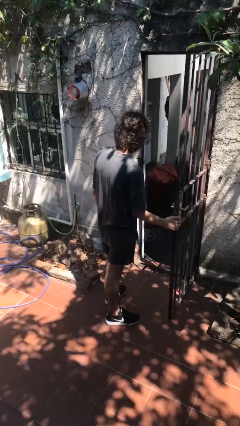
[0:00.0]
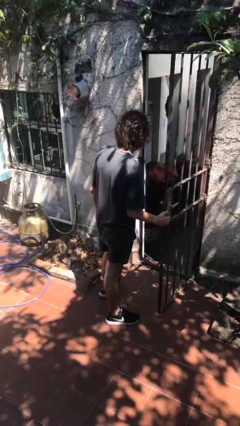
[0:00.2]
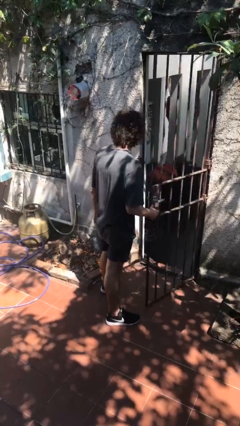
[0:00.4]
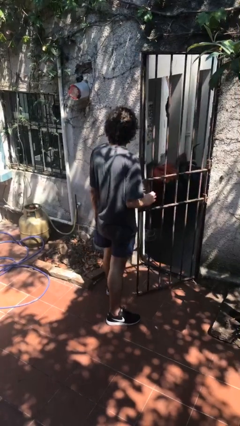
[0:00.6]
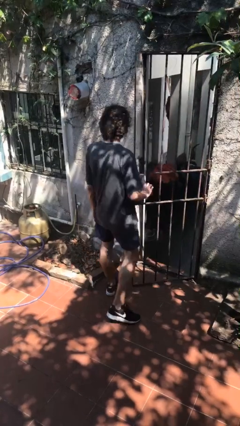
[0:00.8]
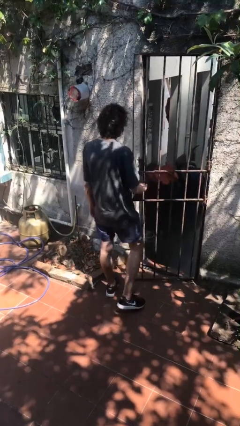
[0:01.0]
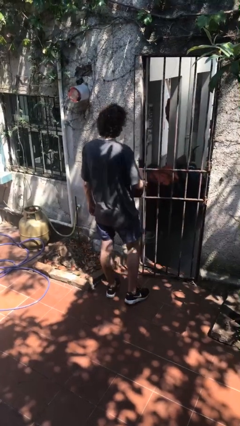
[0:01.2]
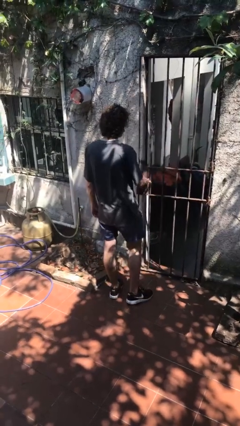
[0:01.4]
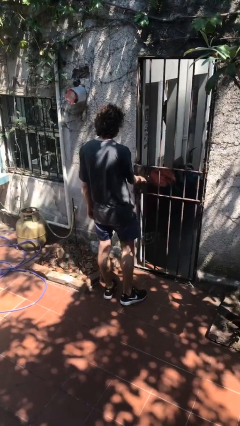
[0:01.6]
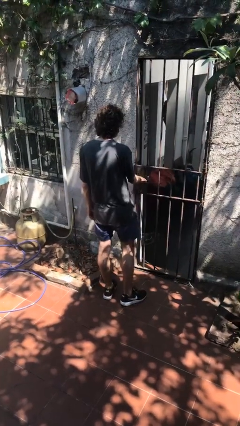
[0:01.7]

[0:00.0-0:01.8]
person closes facility door

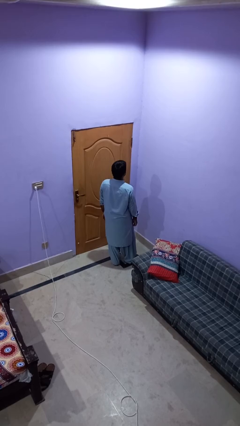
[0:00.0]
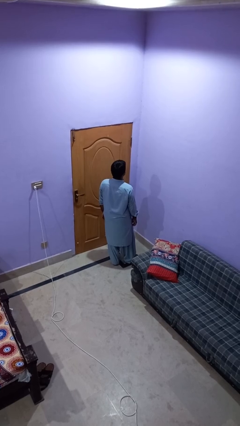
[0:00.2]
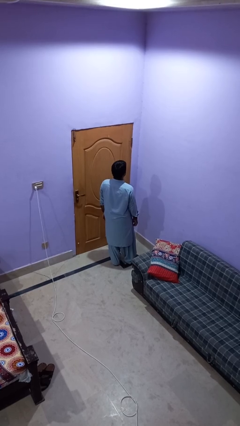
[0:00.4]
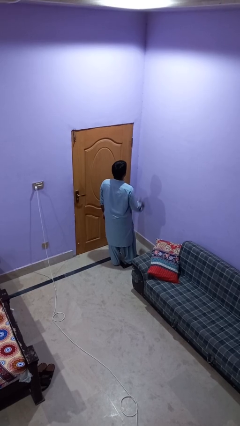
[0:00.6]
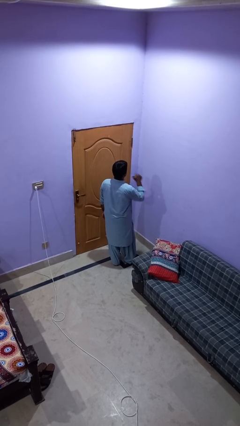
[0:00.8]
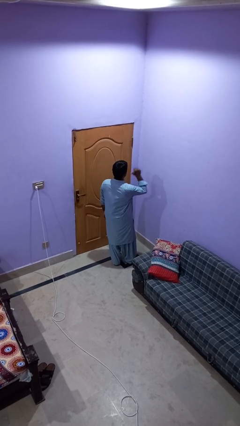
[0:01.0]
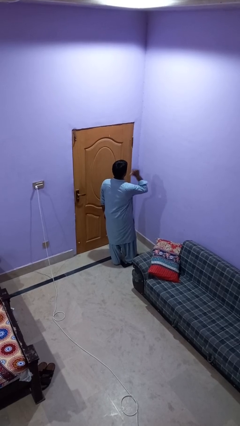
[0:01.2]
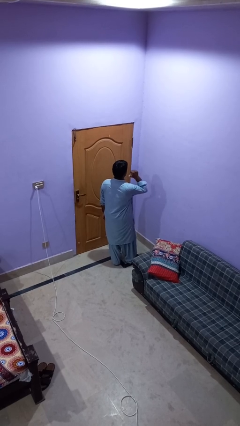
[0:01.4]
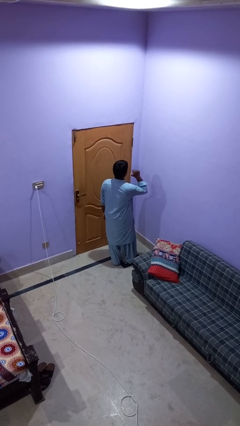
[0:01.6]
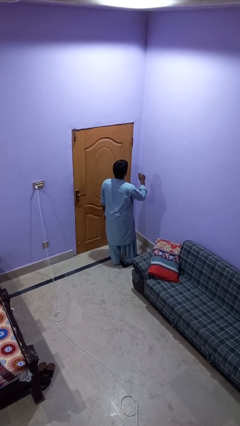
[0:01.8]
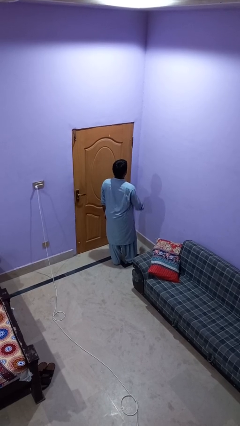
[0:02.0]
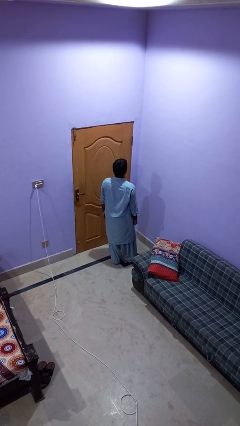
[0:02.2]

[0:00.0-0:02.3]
person gestures behind me

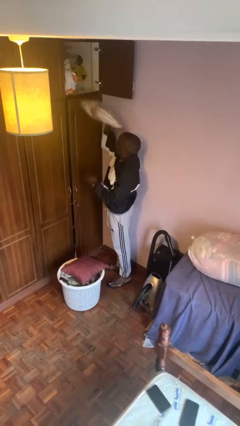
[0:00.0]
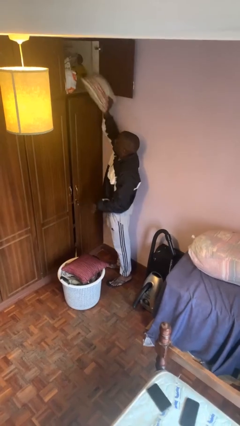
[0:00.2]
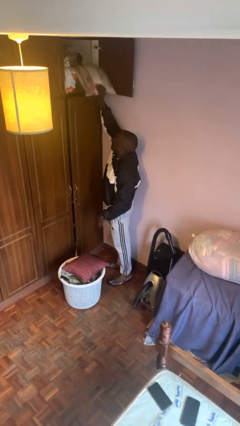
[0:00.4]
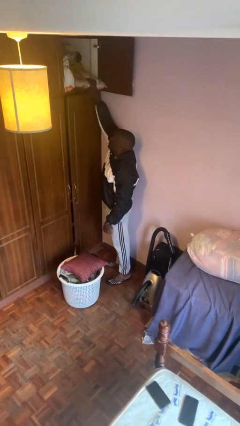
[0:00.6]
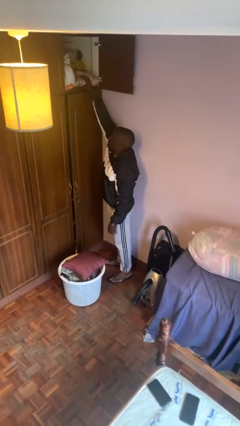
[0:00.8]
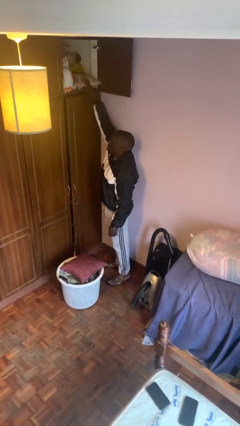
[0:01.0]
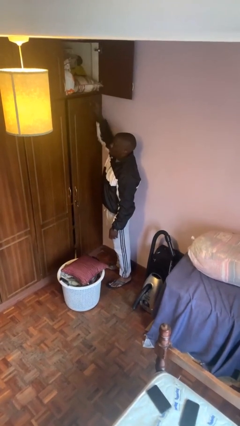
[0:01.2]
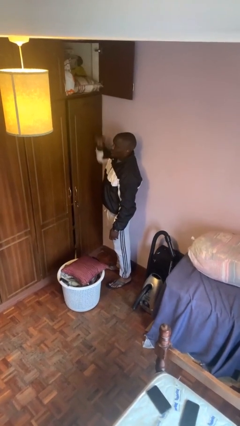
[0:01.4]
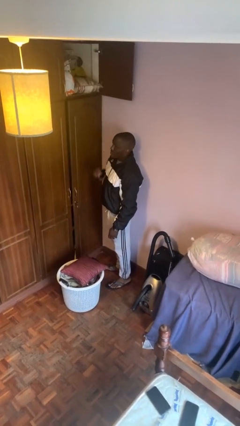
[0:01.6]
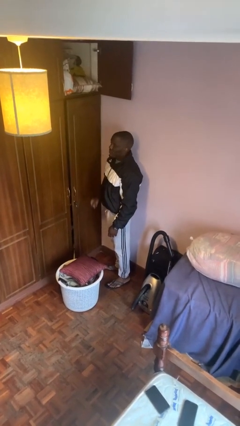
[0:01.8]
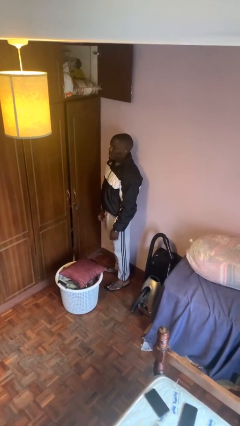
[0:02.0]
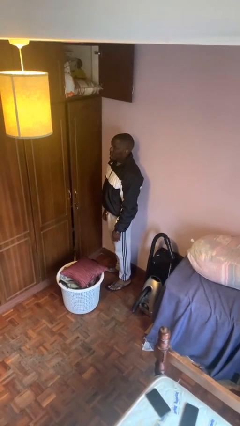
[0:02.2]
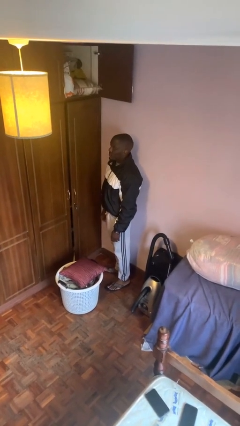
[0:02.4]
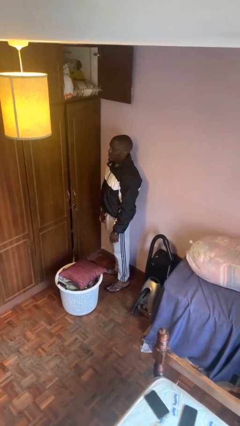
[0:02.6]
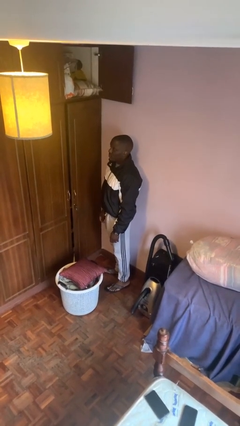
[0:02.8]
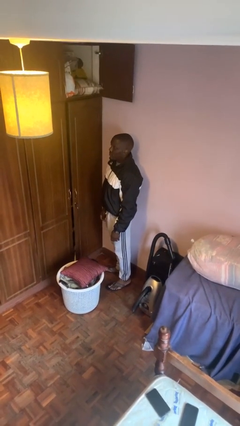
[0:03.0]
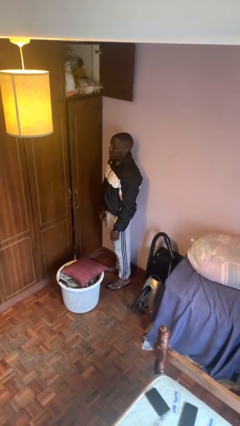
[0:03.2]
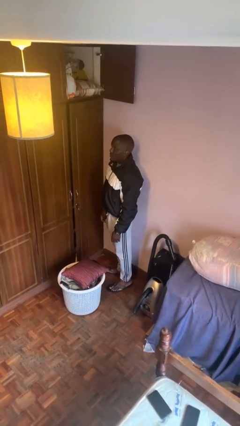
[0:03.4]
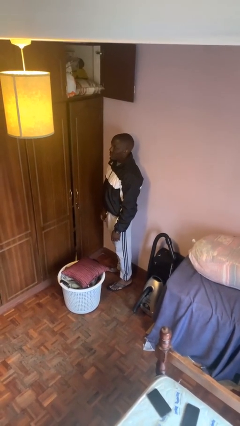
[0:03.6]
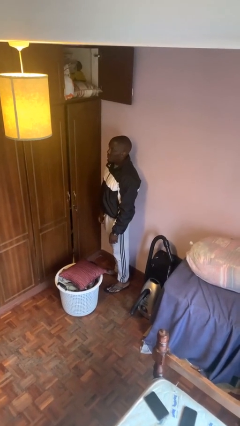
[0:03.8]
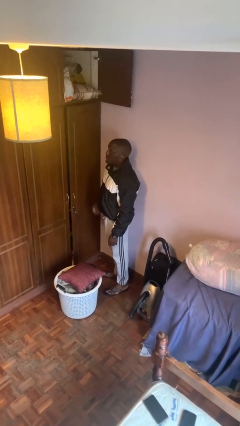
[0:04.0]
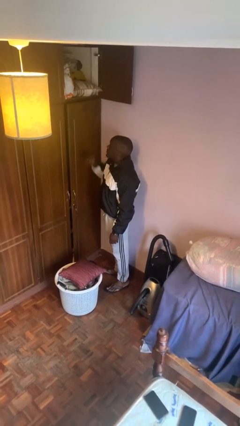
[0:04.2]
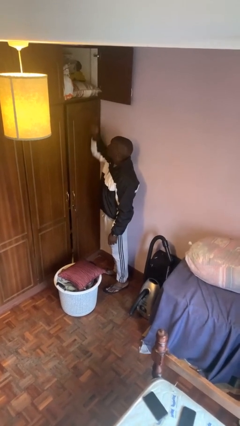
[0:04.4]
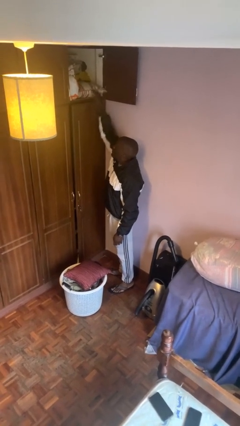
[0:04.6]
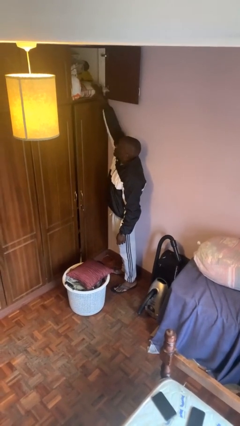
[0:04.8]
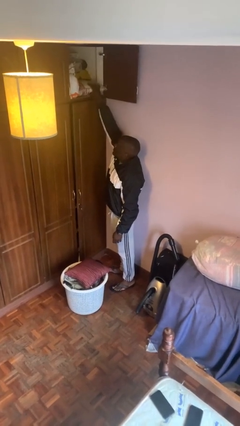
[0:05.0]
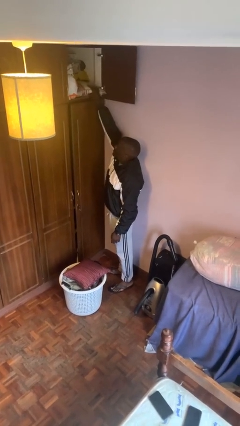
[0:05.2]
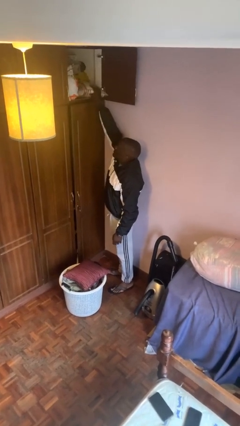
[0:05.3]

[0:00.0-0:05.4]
person puts down object on shelf

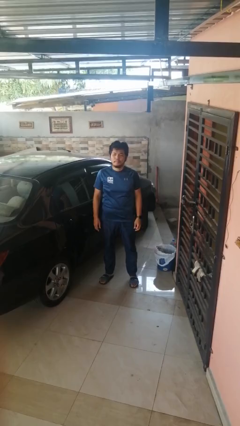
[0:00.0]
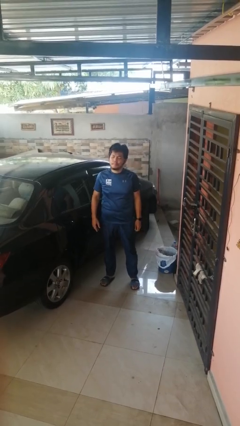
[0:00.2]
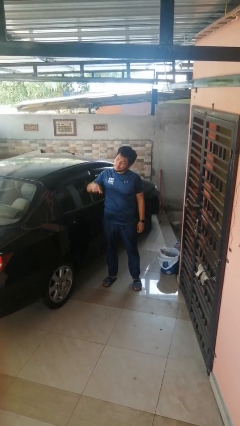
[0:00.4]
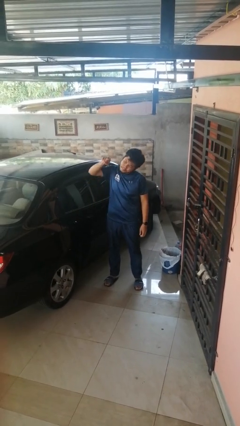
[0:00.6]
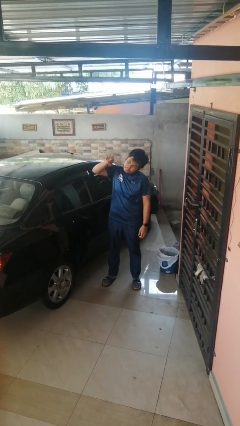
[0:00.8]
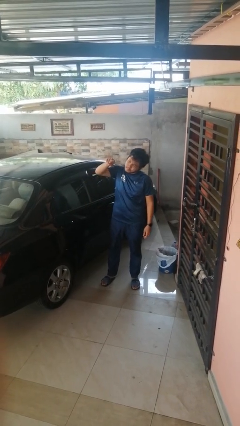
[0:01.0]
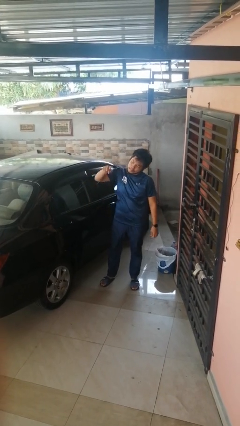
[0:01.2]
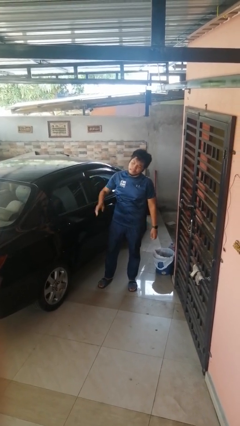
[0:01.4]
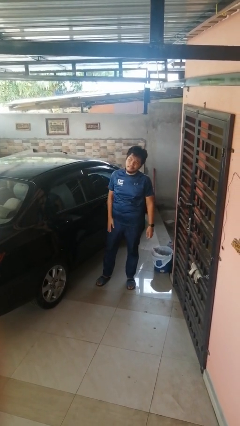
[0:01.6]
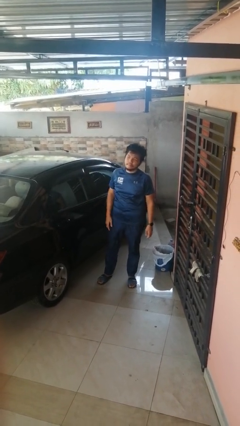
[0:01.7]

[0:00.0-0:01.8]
person points at person

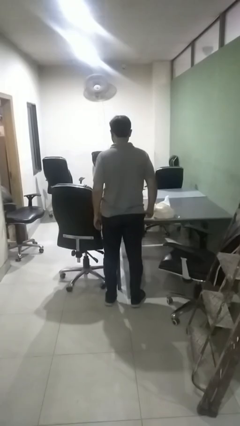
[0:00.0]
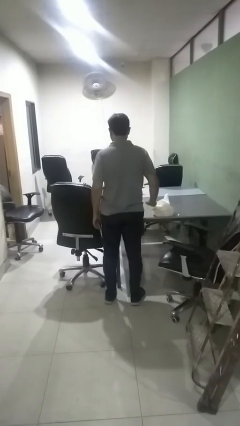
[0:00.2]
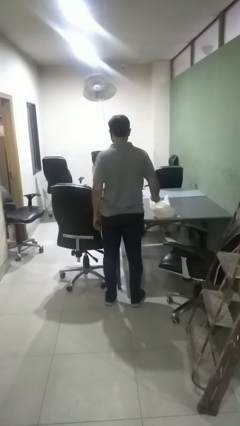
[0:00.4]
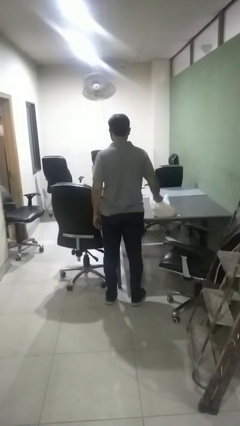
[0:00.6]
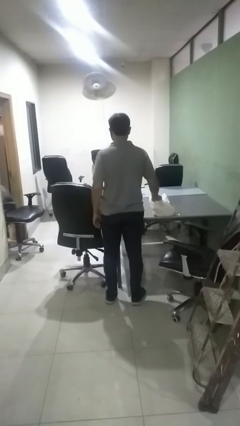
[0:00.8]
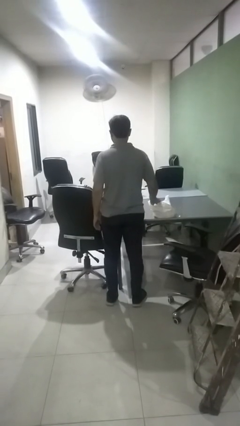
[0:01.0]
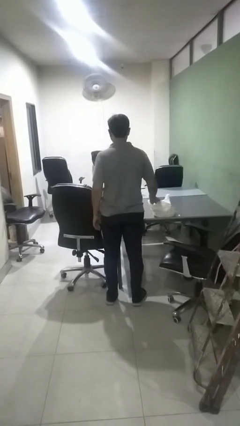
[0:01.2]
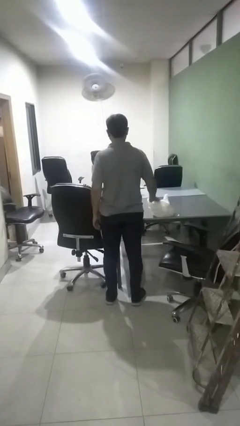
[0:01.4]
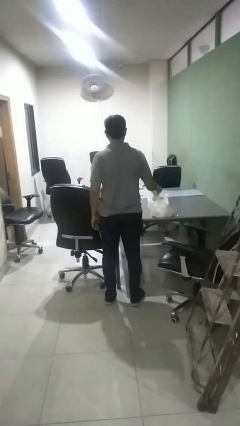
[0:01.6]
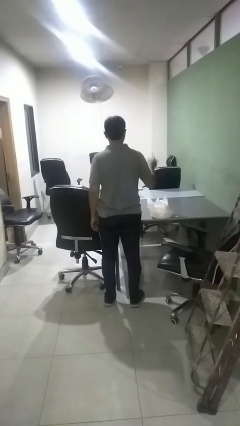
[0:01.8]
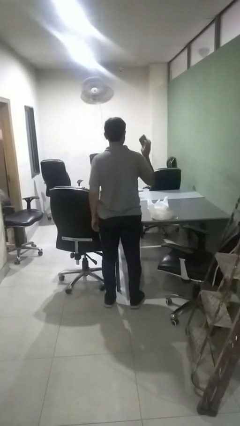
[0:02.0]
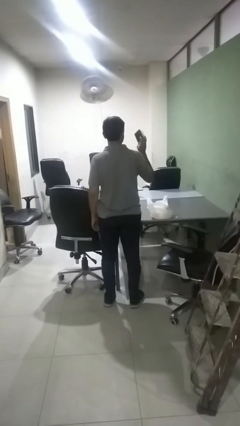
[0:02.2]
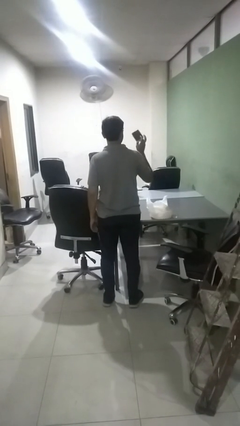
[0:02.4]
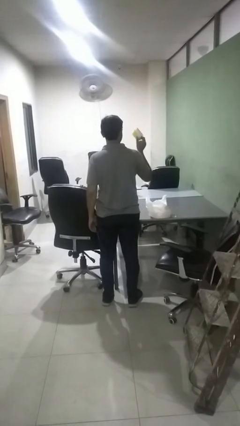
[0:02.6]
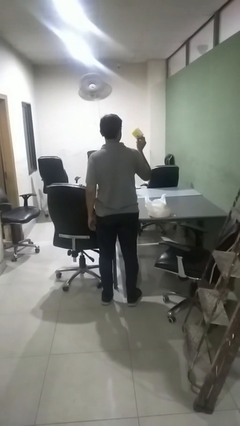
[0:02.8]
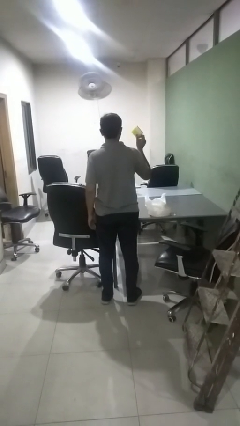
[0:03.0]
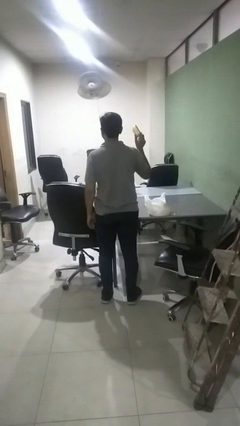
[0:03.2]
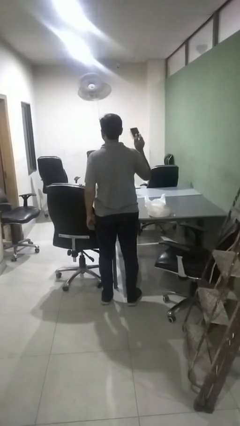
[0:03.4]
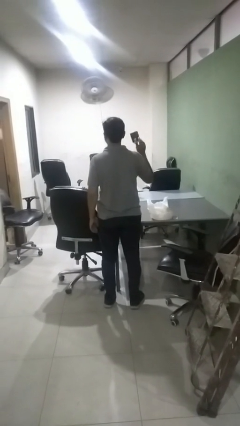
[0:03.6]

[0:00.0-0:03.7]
person takes object from bag

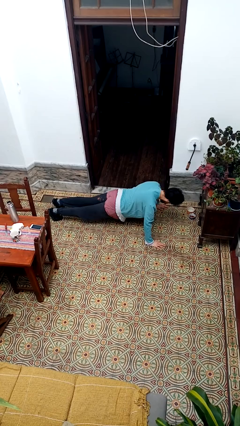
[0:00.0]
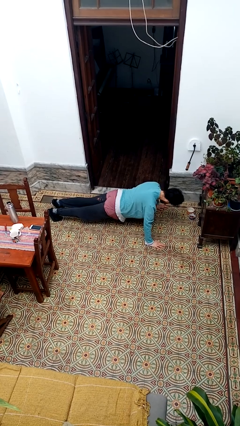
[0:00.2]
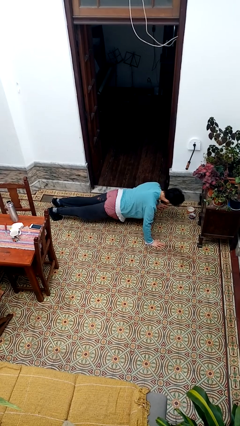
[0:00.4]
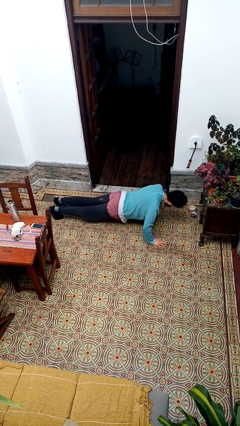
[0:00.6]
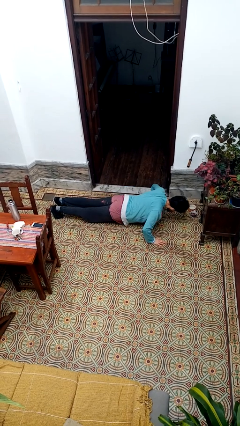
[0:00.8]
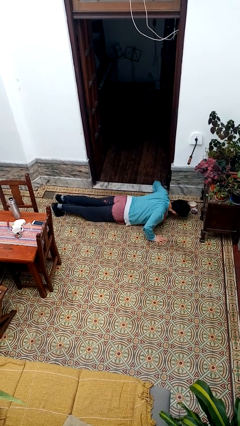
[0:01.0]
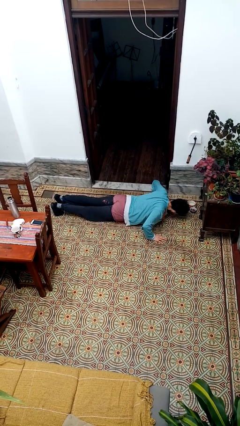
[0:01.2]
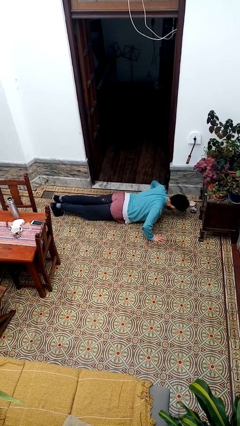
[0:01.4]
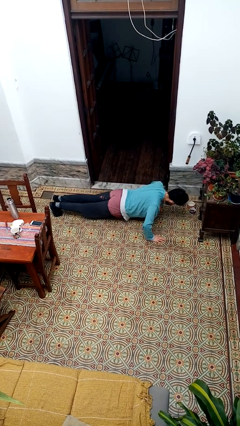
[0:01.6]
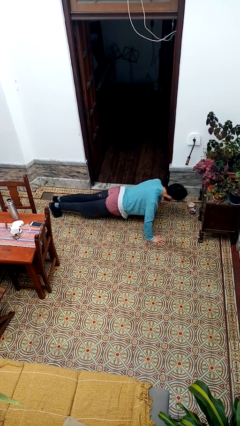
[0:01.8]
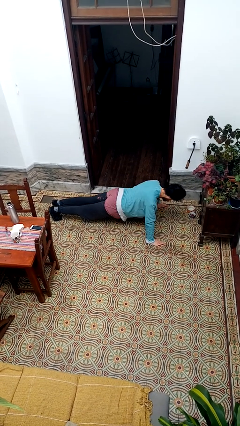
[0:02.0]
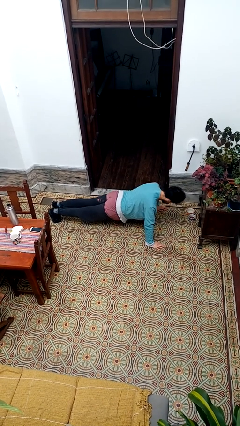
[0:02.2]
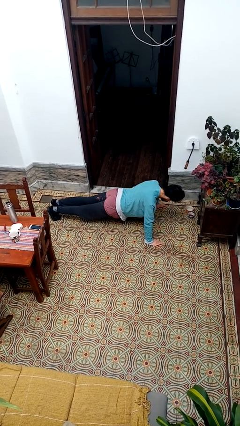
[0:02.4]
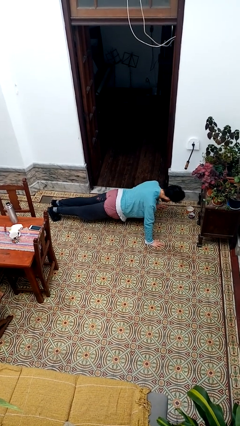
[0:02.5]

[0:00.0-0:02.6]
person exercises with pushup

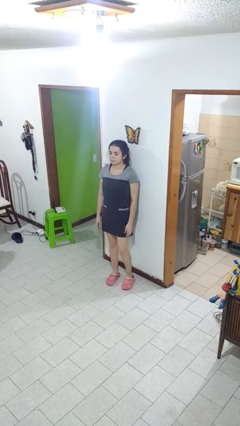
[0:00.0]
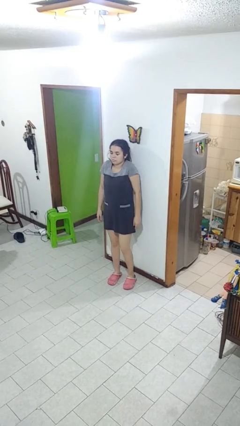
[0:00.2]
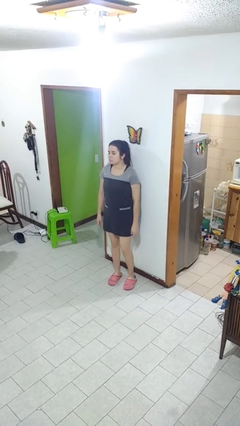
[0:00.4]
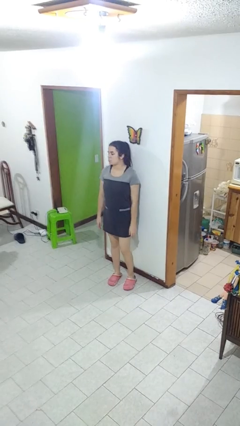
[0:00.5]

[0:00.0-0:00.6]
person shrugs
